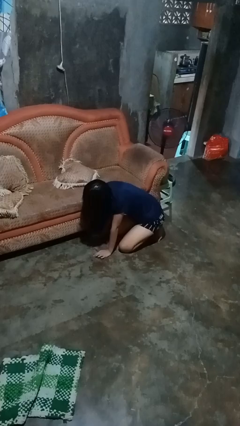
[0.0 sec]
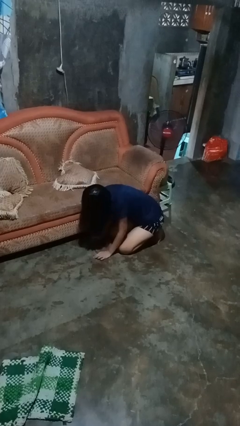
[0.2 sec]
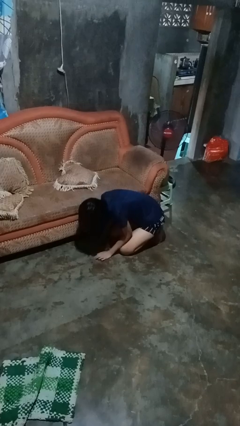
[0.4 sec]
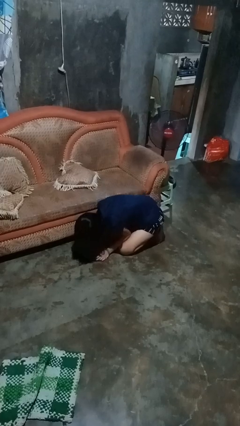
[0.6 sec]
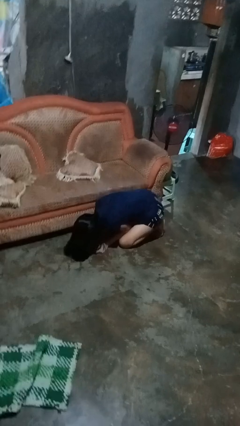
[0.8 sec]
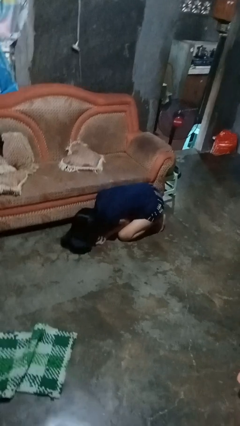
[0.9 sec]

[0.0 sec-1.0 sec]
person searches under couch

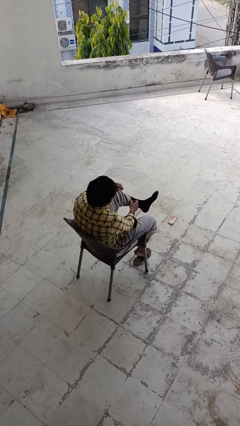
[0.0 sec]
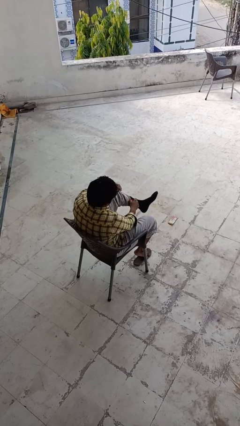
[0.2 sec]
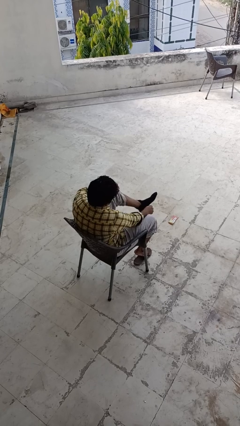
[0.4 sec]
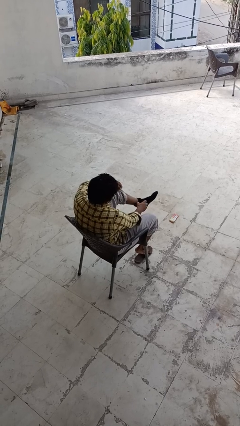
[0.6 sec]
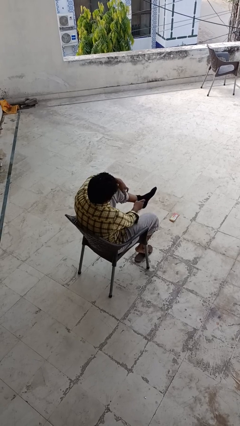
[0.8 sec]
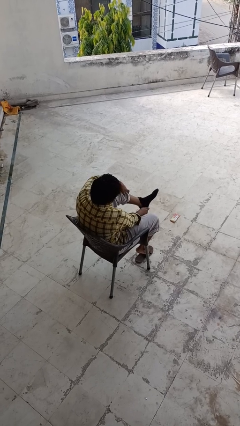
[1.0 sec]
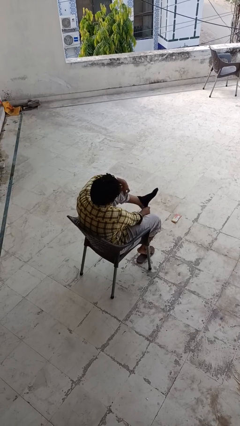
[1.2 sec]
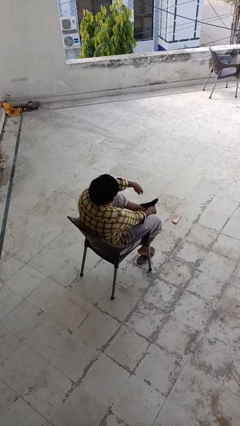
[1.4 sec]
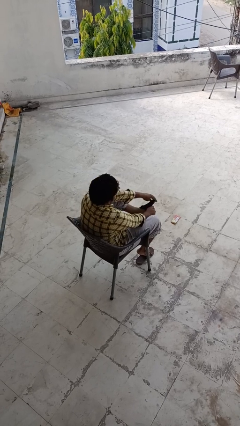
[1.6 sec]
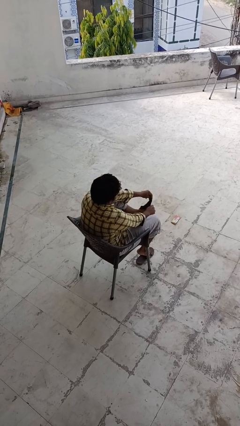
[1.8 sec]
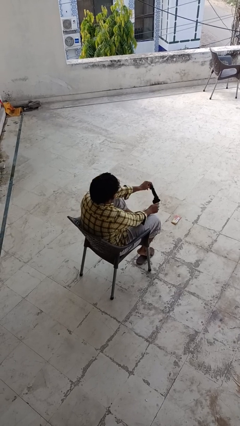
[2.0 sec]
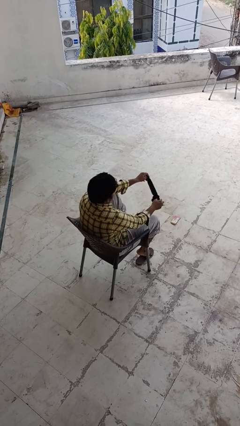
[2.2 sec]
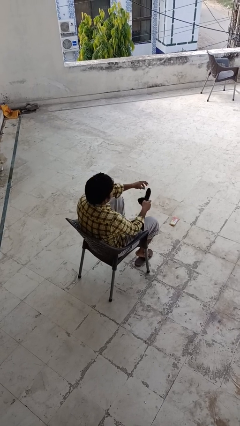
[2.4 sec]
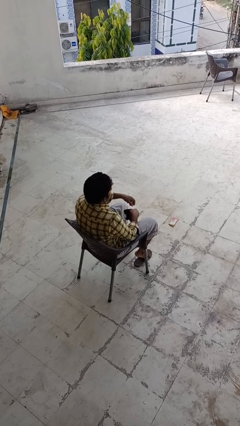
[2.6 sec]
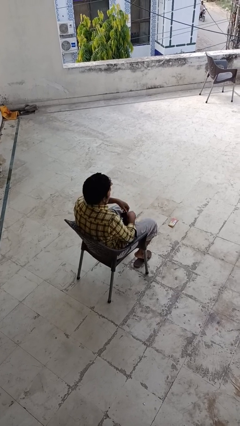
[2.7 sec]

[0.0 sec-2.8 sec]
person takes off socks

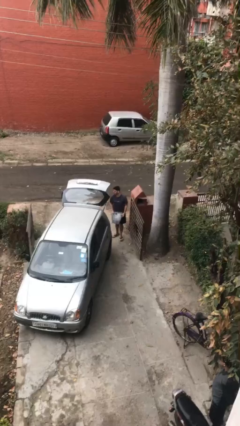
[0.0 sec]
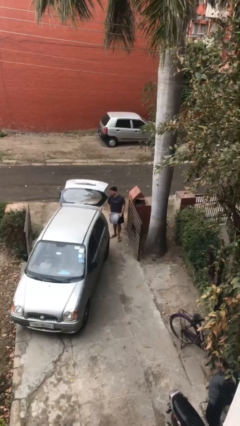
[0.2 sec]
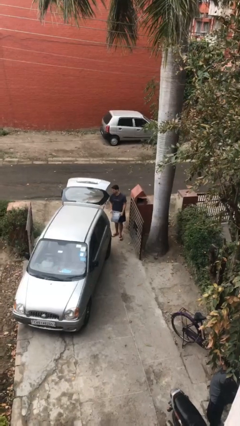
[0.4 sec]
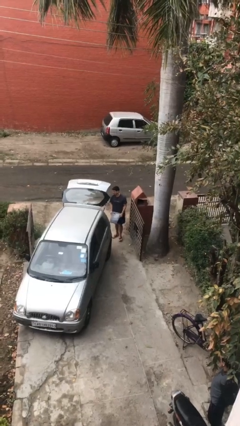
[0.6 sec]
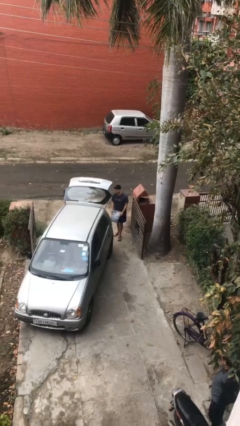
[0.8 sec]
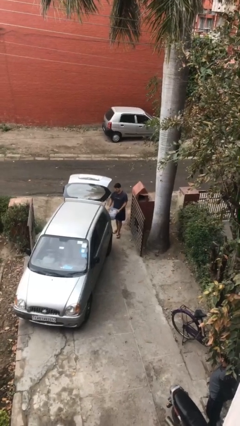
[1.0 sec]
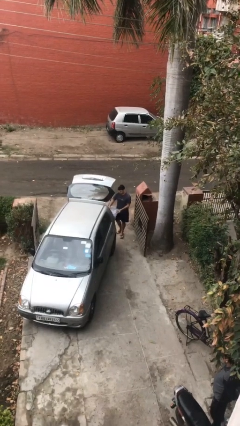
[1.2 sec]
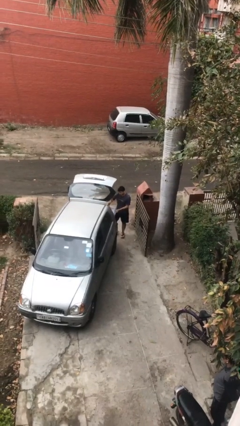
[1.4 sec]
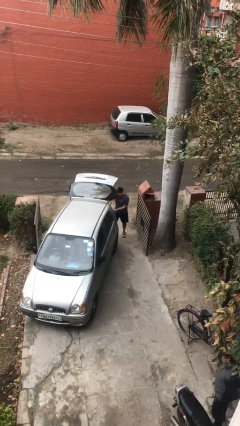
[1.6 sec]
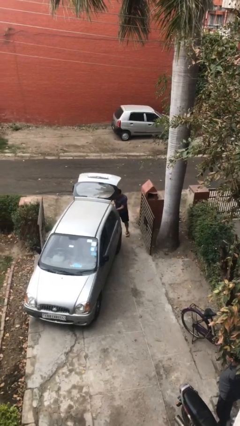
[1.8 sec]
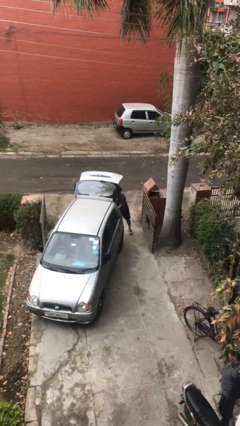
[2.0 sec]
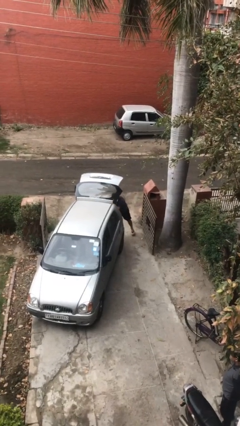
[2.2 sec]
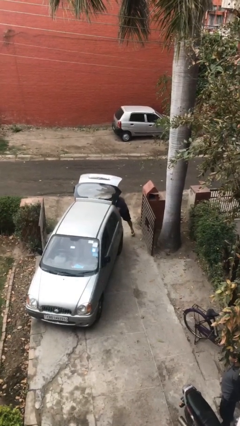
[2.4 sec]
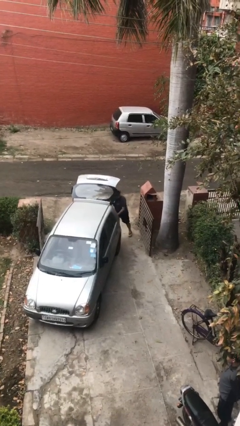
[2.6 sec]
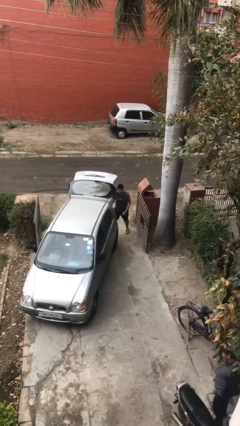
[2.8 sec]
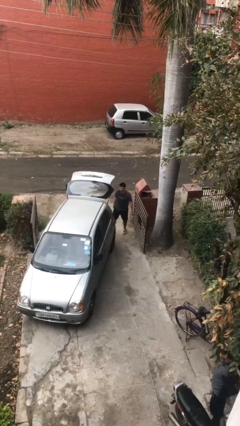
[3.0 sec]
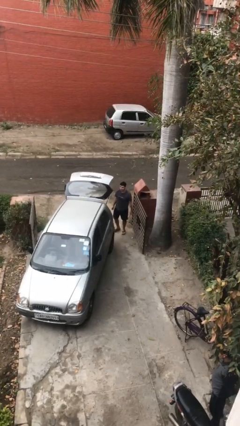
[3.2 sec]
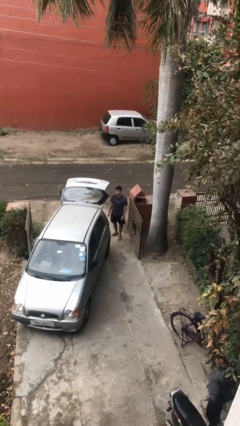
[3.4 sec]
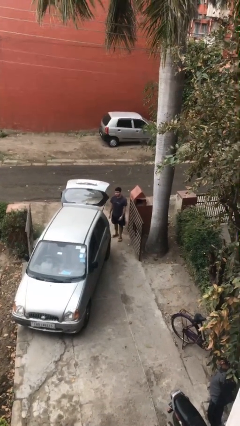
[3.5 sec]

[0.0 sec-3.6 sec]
person loads car

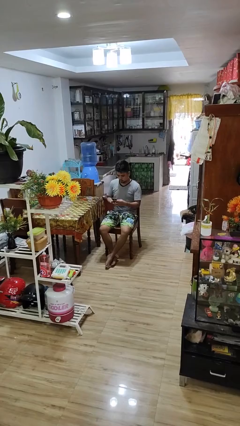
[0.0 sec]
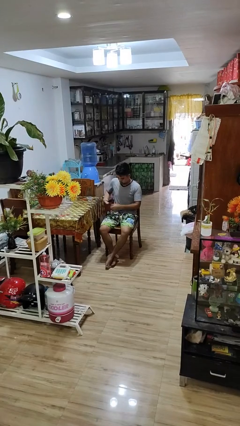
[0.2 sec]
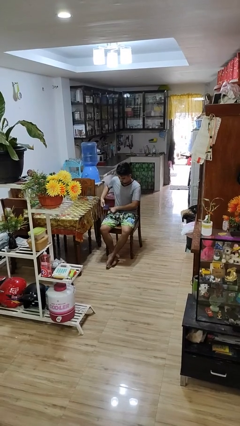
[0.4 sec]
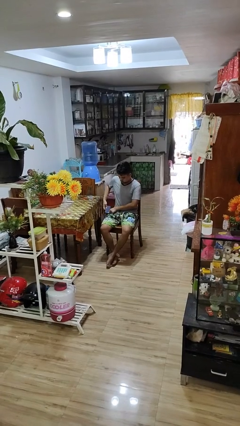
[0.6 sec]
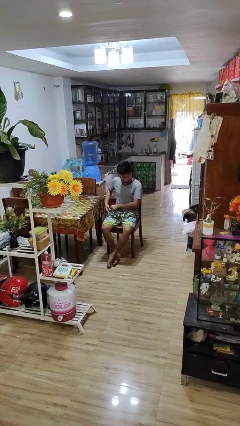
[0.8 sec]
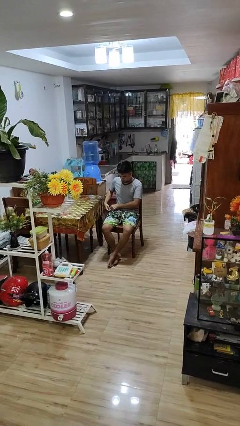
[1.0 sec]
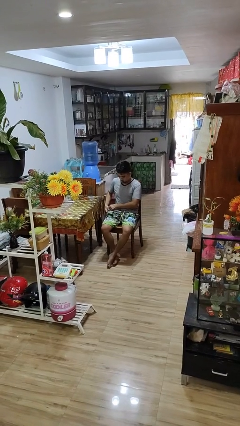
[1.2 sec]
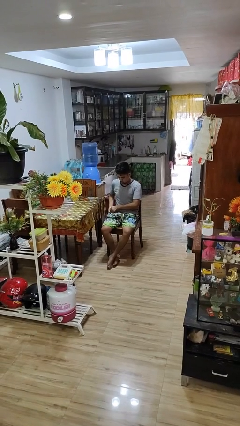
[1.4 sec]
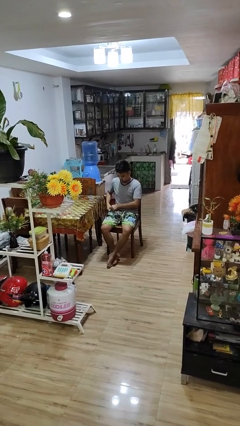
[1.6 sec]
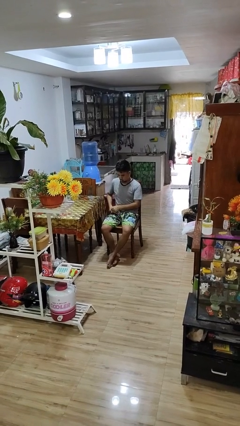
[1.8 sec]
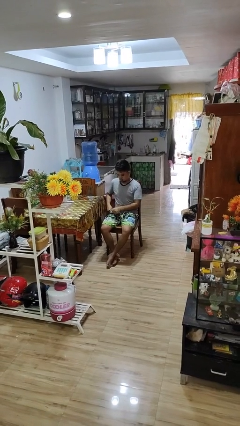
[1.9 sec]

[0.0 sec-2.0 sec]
person puts phone into pocket

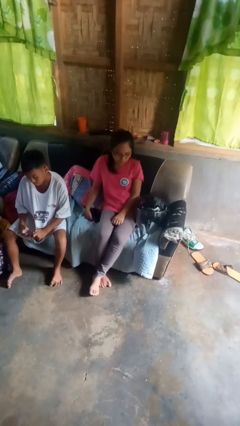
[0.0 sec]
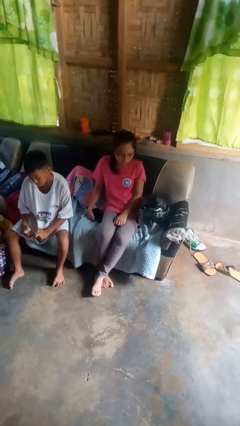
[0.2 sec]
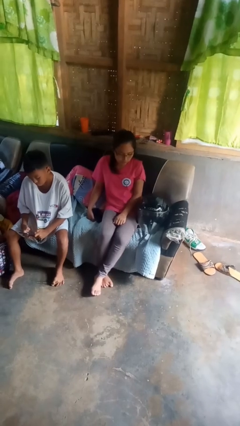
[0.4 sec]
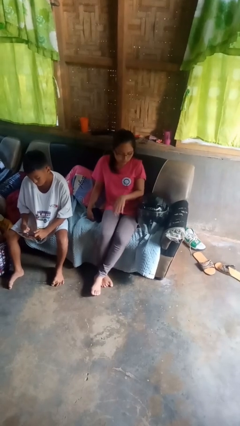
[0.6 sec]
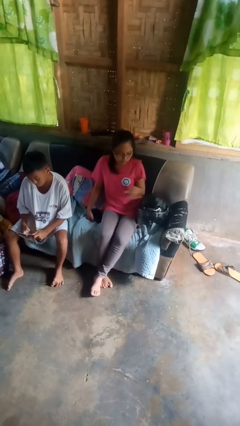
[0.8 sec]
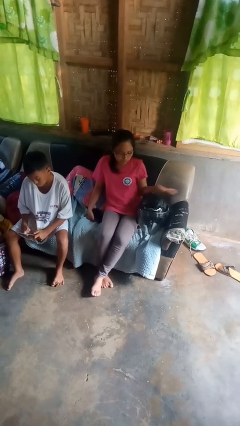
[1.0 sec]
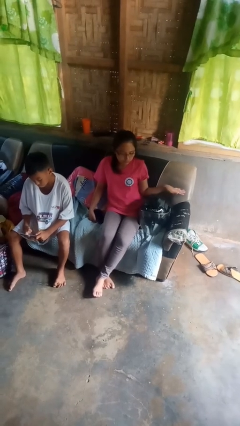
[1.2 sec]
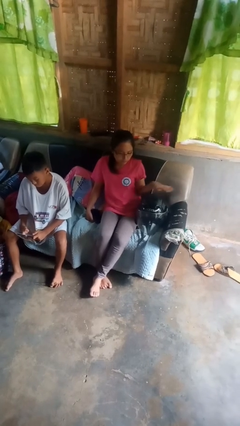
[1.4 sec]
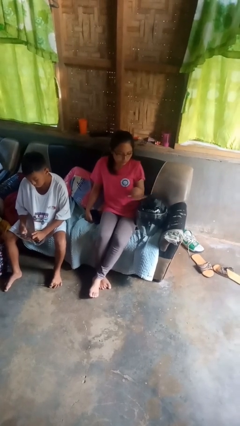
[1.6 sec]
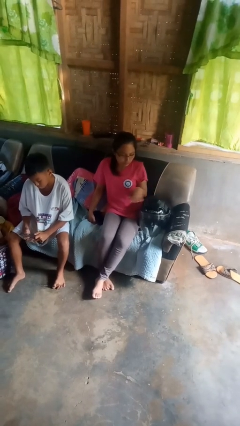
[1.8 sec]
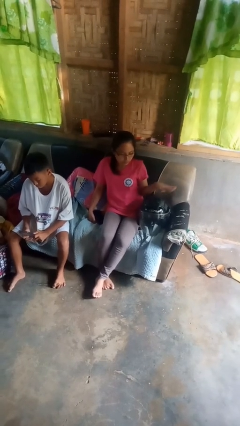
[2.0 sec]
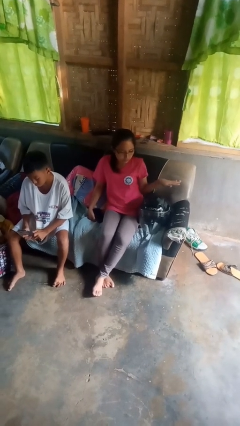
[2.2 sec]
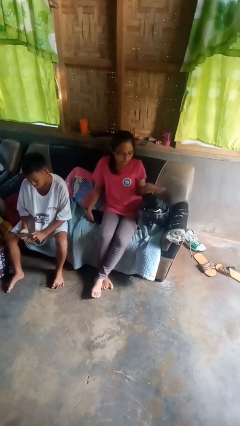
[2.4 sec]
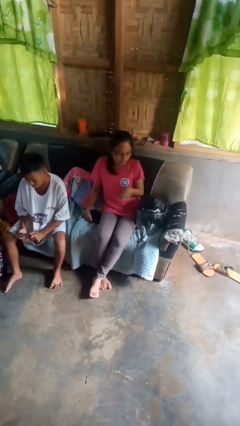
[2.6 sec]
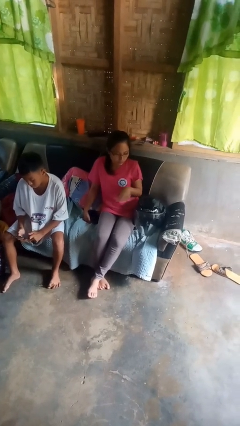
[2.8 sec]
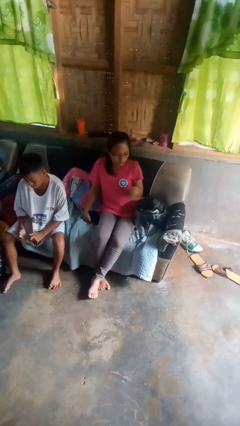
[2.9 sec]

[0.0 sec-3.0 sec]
person waves hand over object

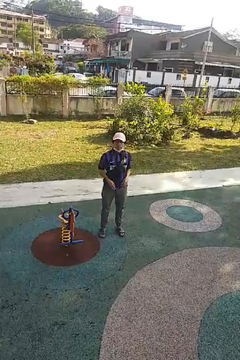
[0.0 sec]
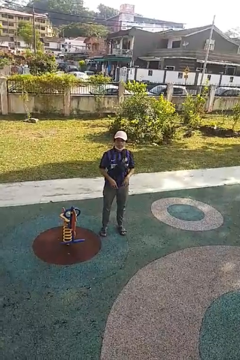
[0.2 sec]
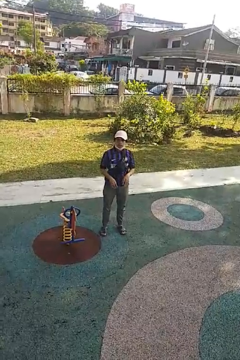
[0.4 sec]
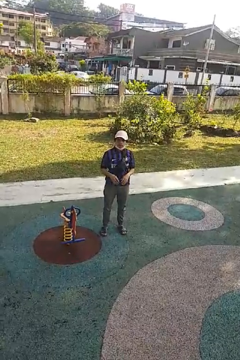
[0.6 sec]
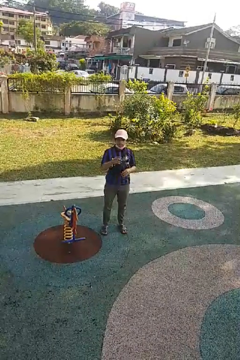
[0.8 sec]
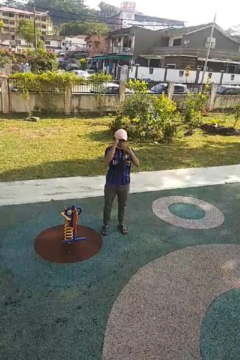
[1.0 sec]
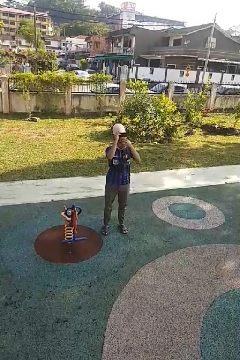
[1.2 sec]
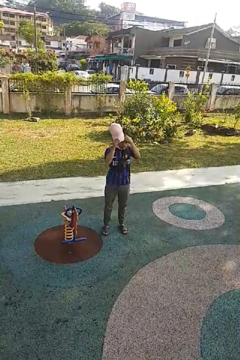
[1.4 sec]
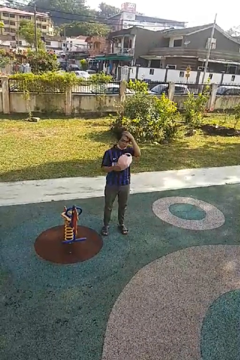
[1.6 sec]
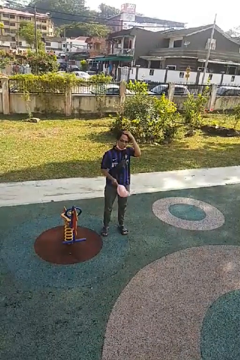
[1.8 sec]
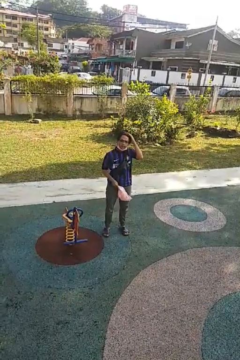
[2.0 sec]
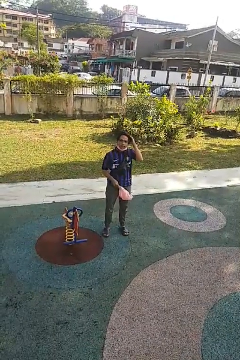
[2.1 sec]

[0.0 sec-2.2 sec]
person takes off hat

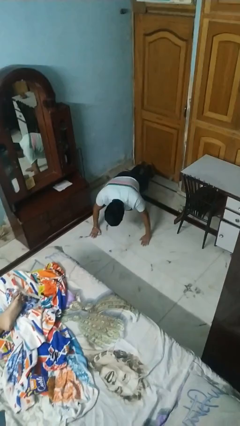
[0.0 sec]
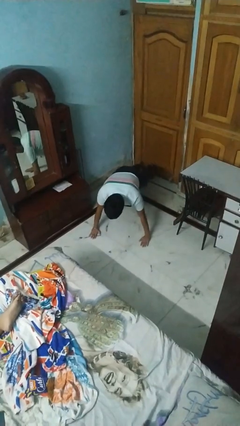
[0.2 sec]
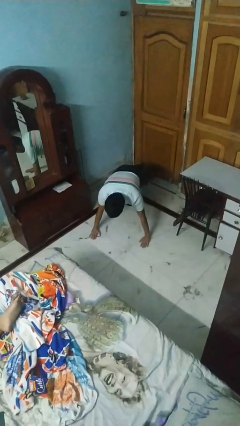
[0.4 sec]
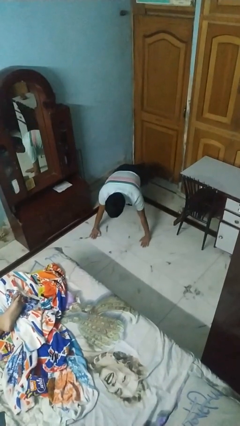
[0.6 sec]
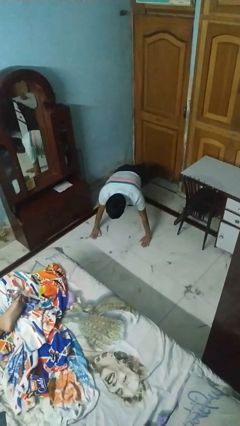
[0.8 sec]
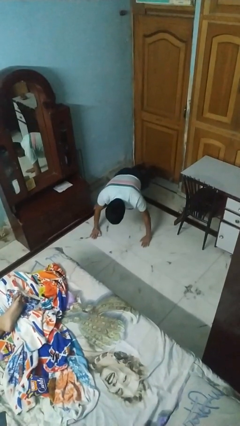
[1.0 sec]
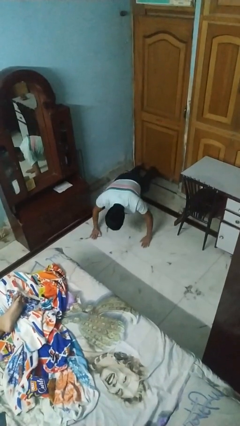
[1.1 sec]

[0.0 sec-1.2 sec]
person exercises with pushup

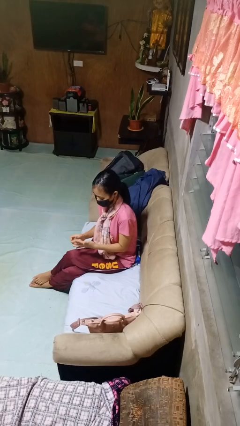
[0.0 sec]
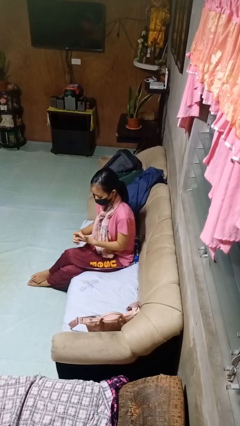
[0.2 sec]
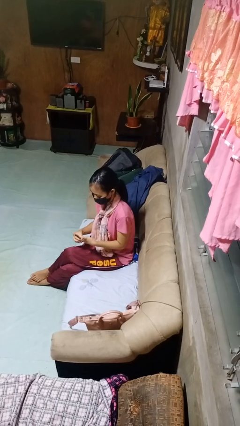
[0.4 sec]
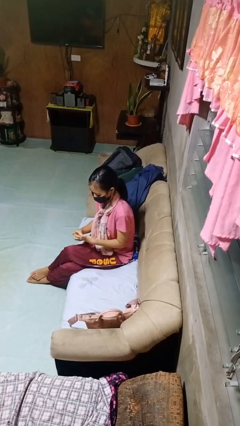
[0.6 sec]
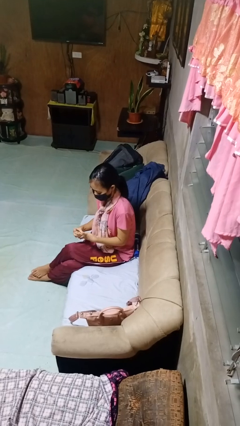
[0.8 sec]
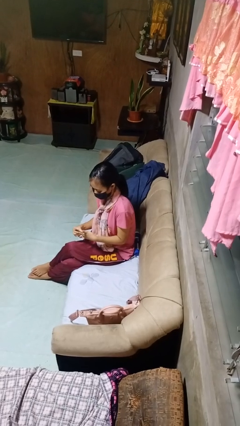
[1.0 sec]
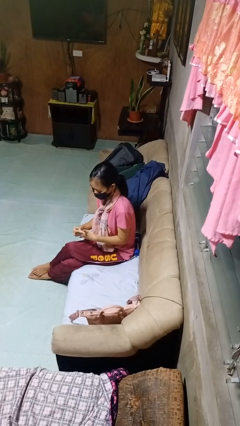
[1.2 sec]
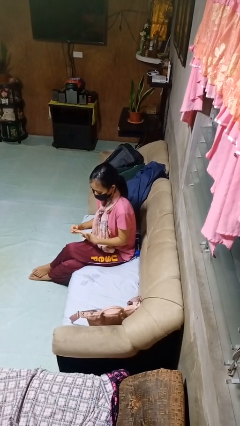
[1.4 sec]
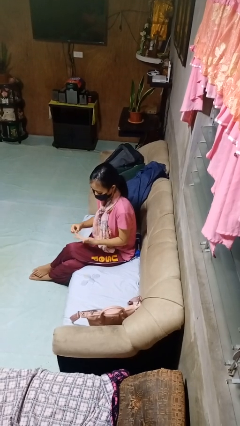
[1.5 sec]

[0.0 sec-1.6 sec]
person takes off ring
